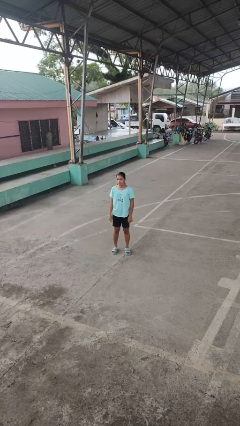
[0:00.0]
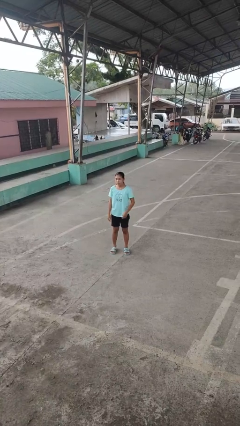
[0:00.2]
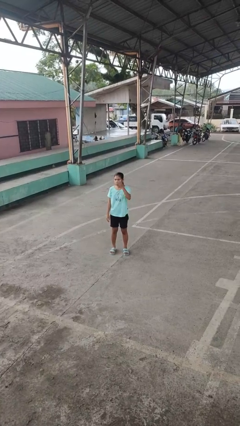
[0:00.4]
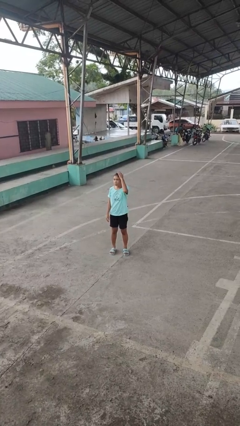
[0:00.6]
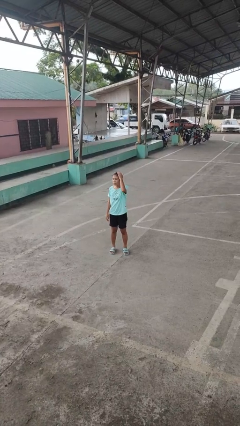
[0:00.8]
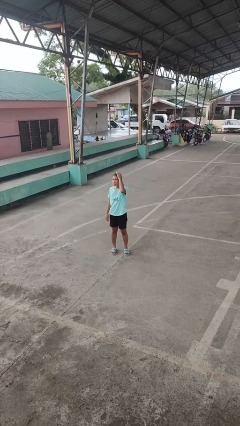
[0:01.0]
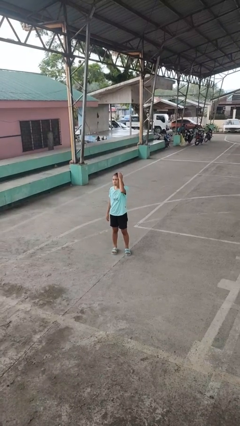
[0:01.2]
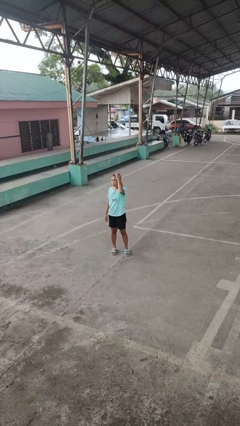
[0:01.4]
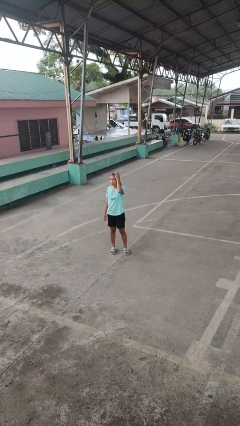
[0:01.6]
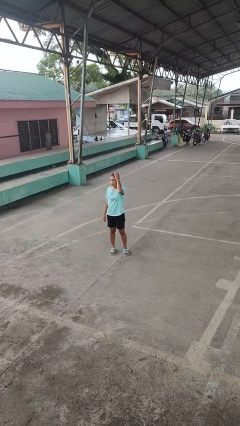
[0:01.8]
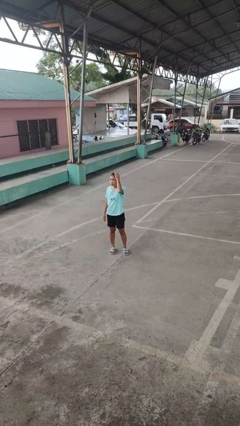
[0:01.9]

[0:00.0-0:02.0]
person pats head

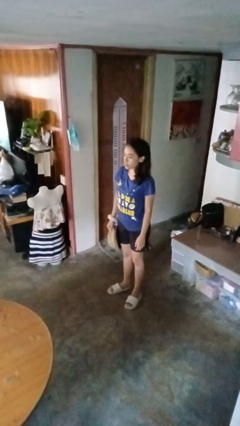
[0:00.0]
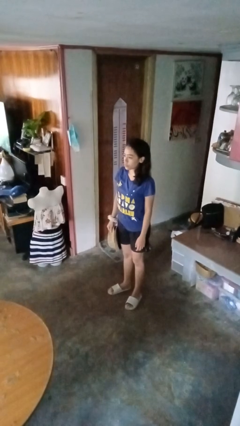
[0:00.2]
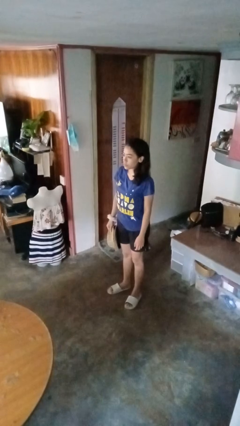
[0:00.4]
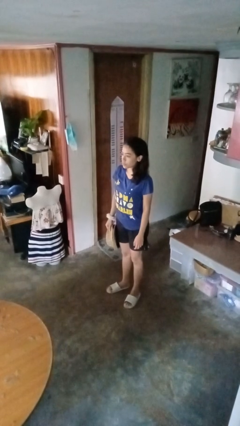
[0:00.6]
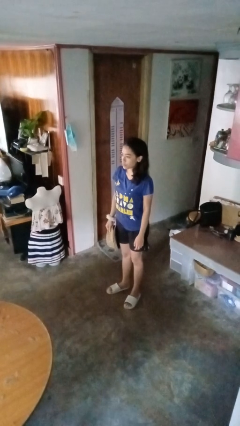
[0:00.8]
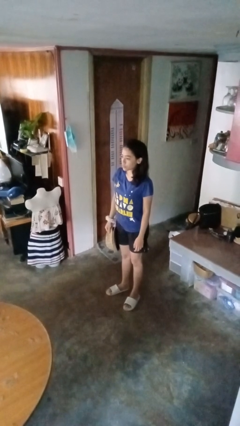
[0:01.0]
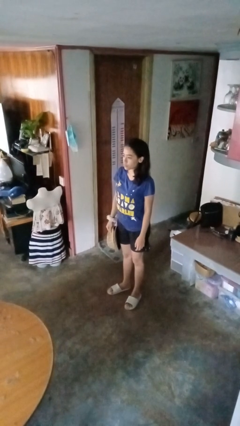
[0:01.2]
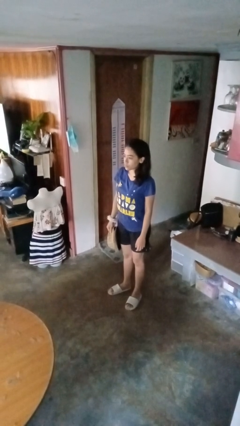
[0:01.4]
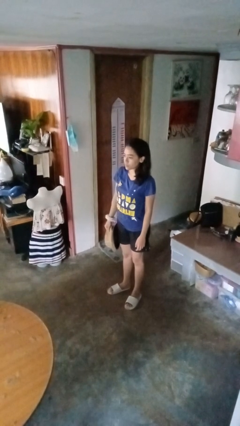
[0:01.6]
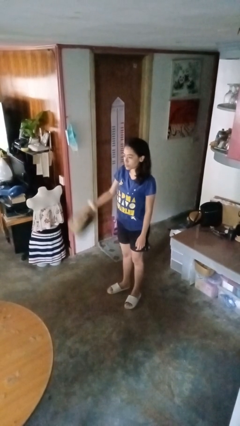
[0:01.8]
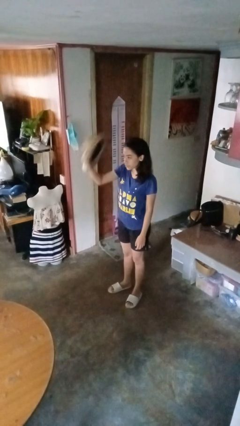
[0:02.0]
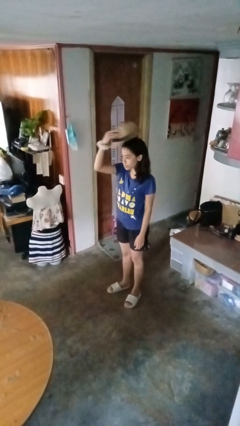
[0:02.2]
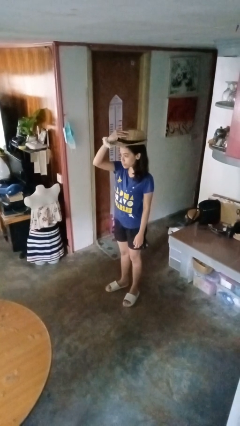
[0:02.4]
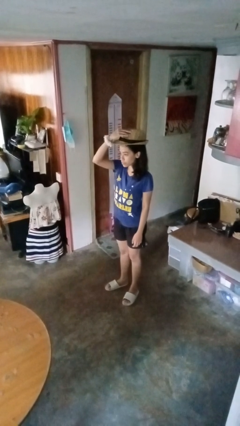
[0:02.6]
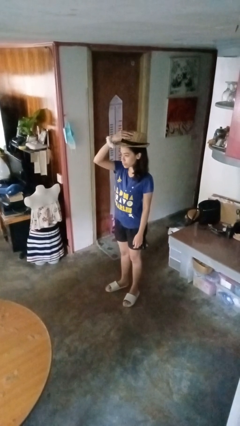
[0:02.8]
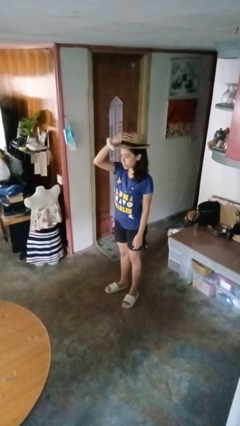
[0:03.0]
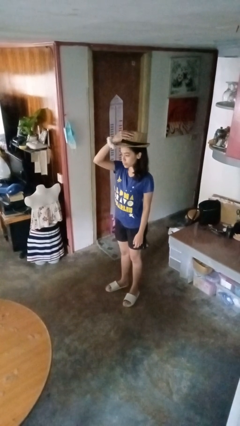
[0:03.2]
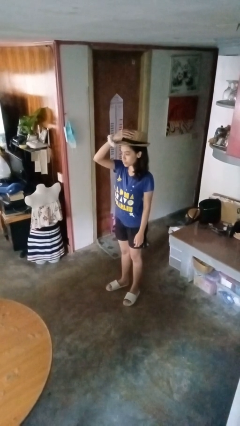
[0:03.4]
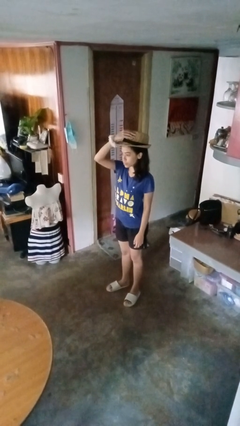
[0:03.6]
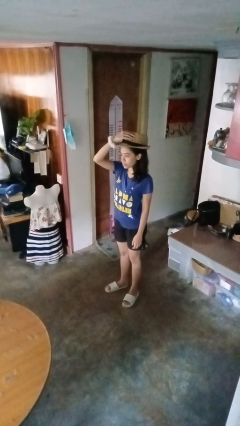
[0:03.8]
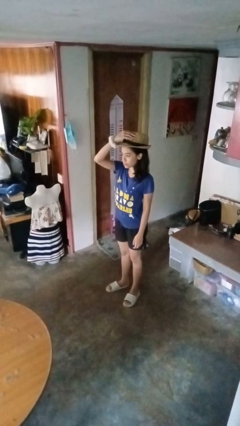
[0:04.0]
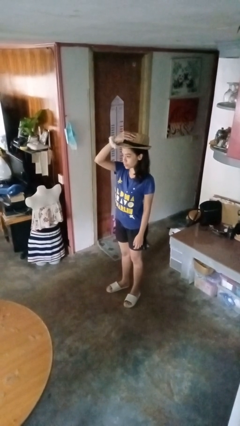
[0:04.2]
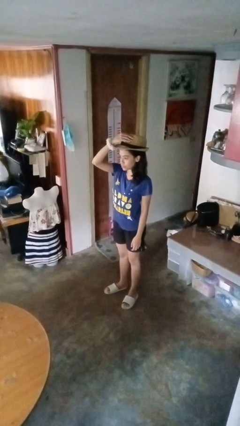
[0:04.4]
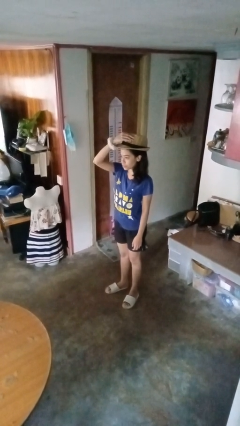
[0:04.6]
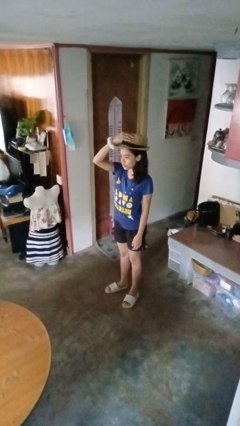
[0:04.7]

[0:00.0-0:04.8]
person puts on hat

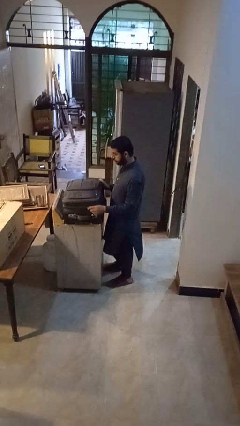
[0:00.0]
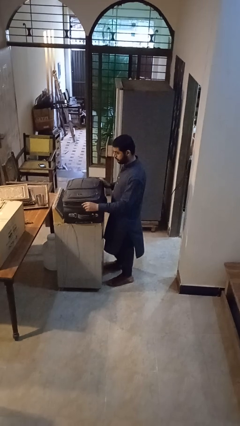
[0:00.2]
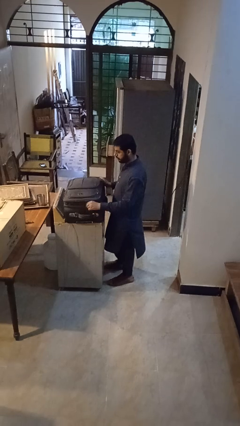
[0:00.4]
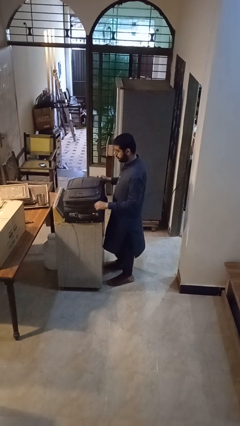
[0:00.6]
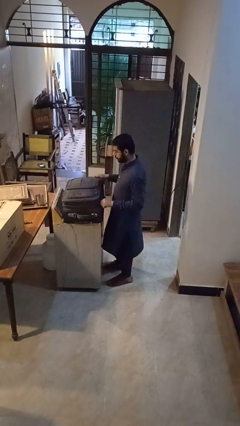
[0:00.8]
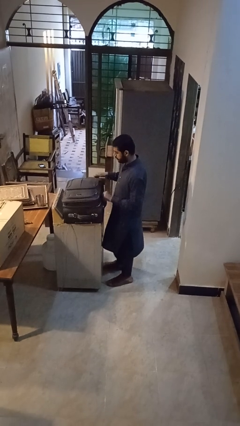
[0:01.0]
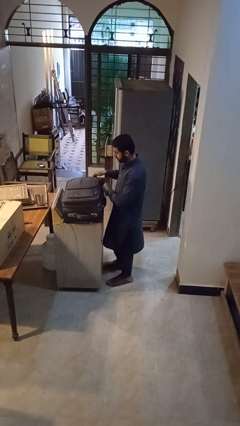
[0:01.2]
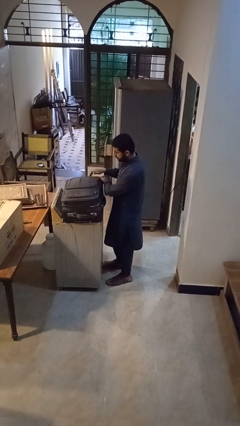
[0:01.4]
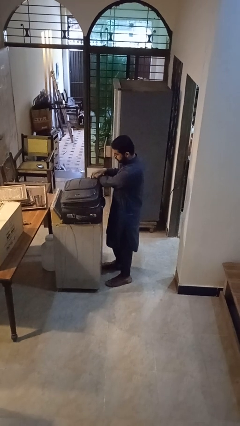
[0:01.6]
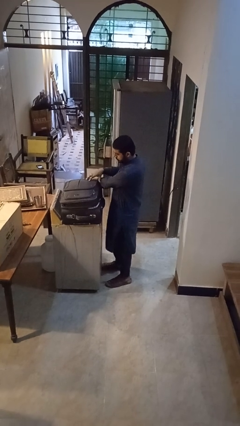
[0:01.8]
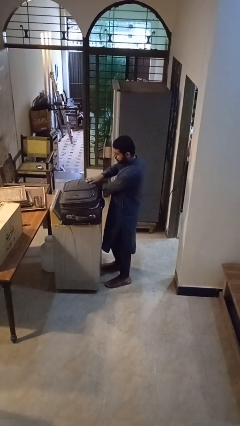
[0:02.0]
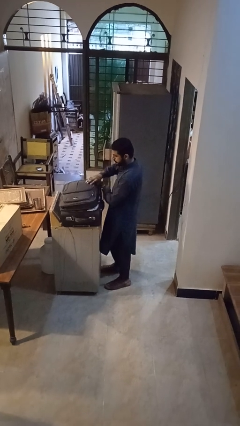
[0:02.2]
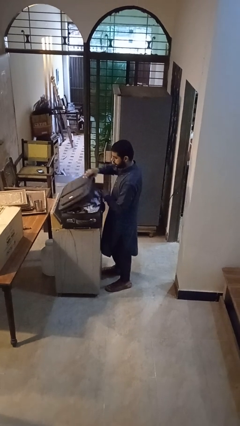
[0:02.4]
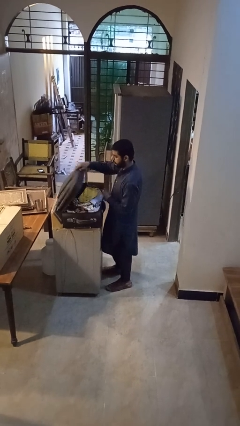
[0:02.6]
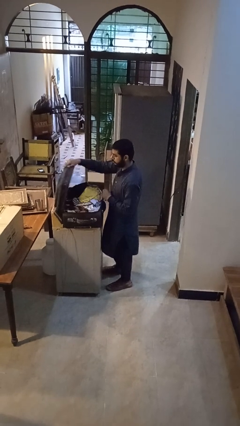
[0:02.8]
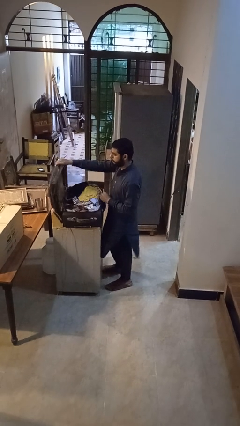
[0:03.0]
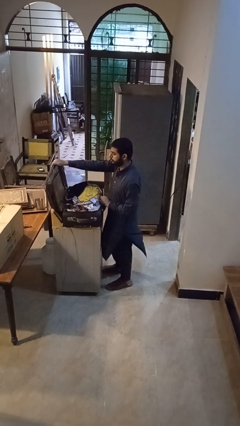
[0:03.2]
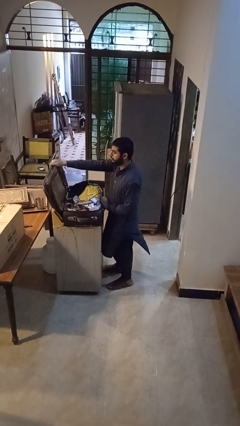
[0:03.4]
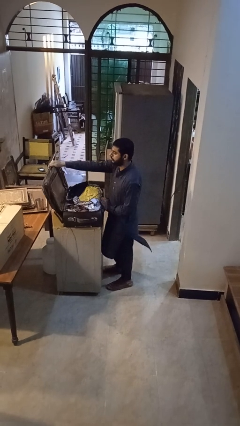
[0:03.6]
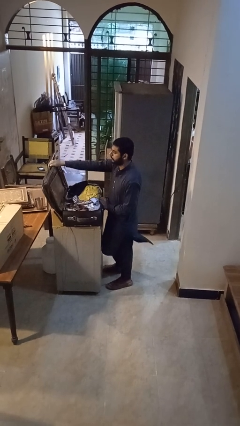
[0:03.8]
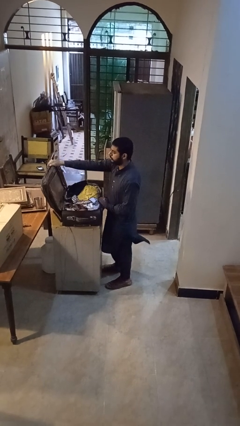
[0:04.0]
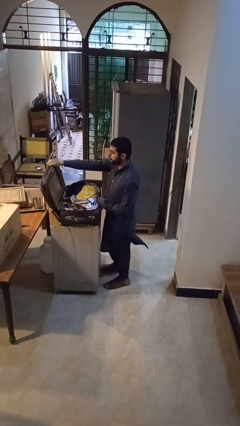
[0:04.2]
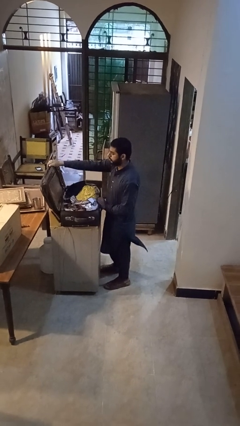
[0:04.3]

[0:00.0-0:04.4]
person opens suitcase

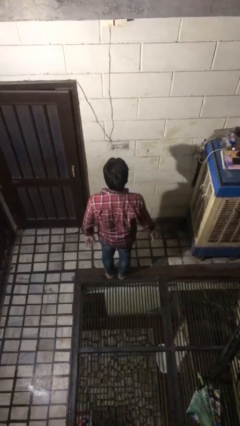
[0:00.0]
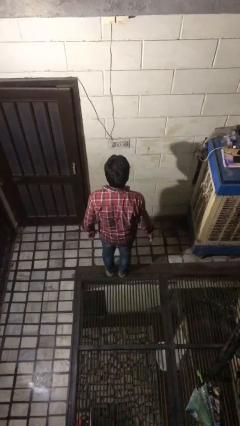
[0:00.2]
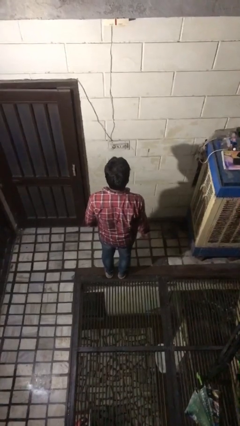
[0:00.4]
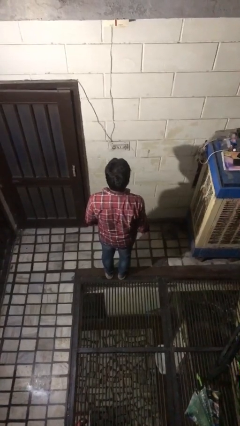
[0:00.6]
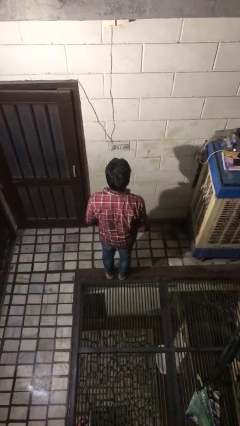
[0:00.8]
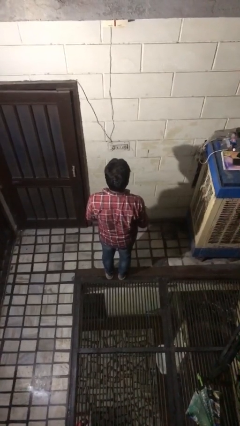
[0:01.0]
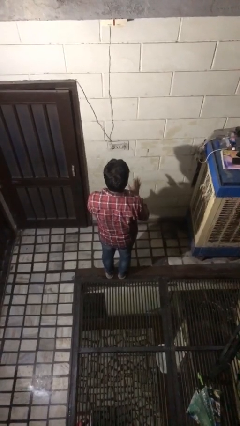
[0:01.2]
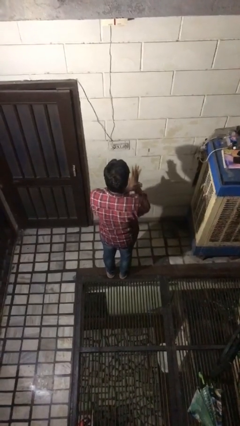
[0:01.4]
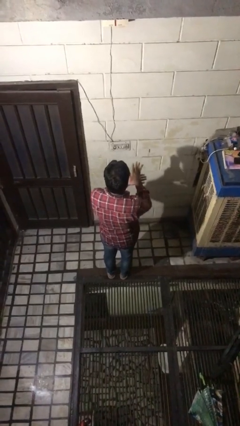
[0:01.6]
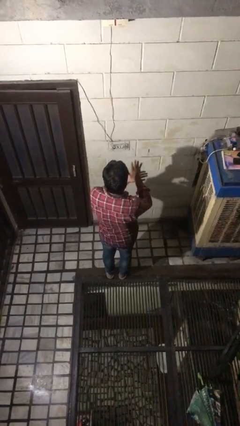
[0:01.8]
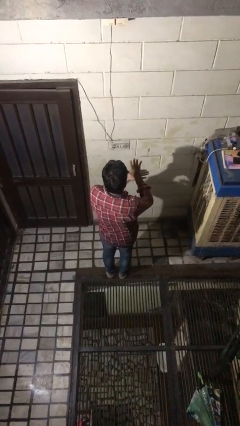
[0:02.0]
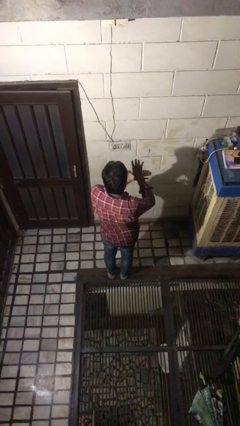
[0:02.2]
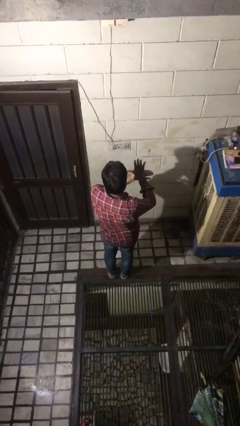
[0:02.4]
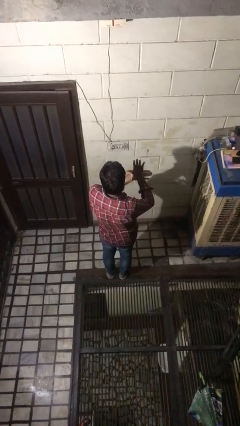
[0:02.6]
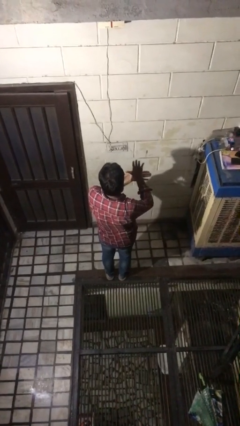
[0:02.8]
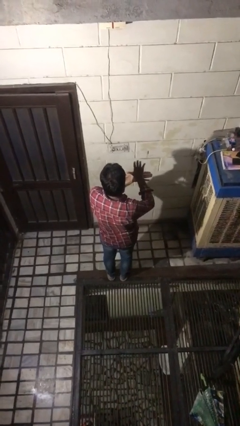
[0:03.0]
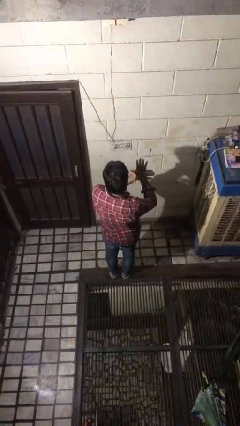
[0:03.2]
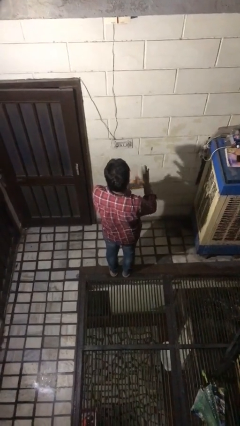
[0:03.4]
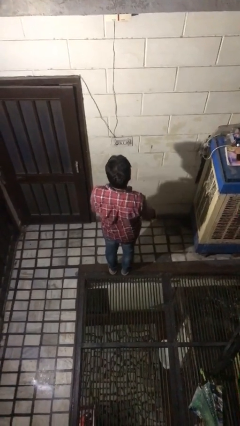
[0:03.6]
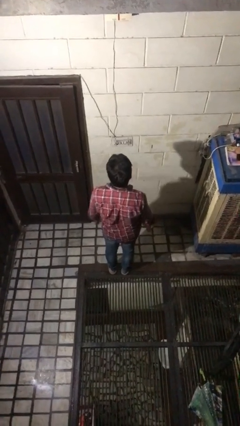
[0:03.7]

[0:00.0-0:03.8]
person gestures number five

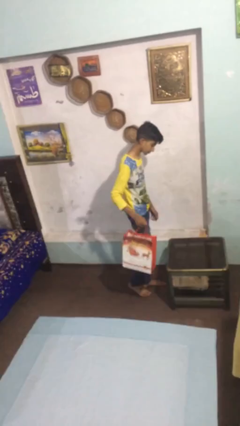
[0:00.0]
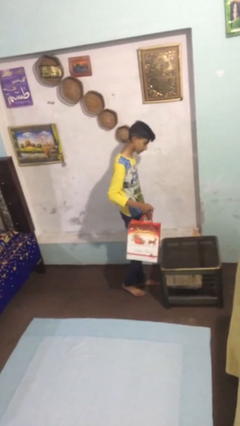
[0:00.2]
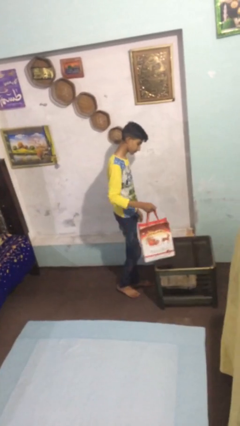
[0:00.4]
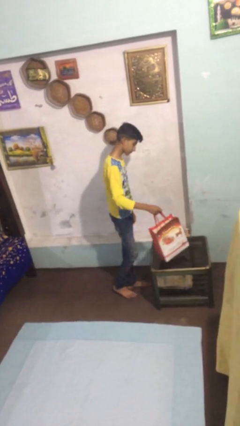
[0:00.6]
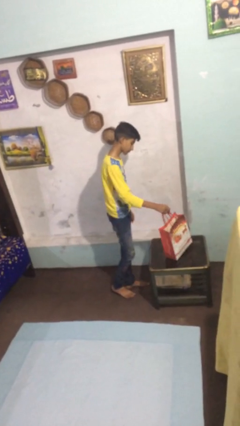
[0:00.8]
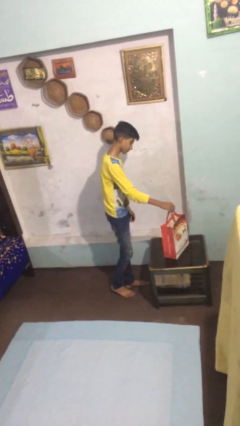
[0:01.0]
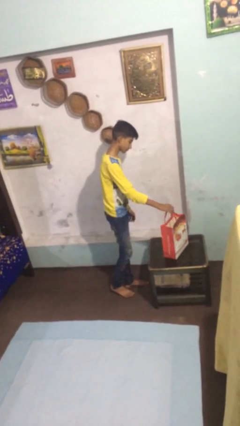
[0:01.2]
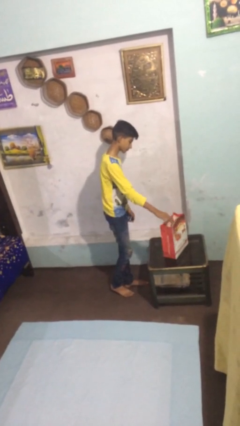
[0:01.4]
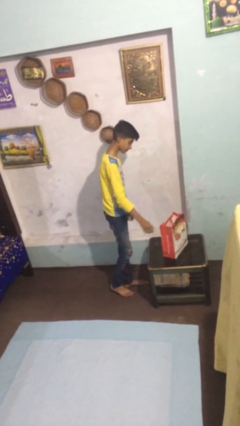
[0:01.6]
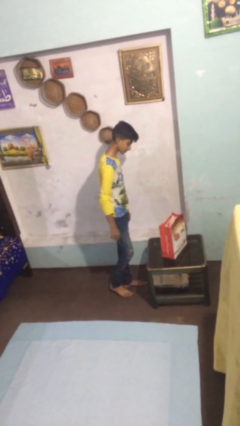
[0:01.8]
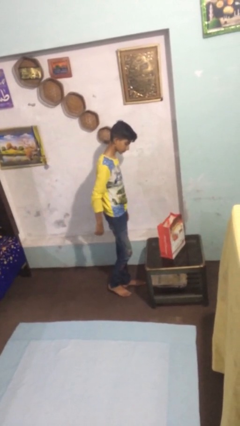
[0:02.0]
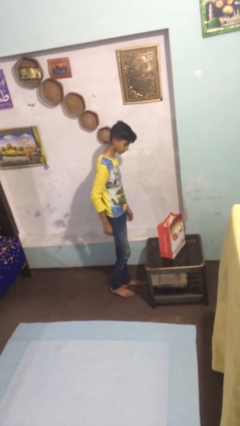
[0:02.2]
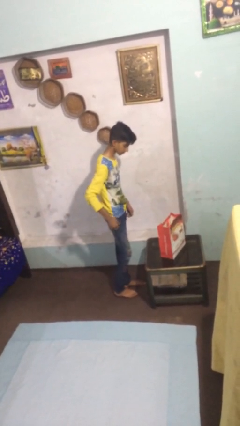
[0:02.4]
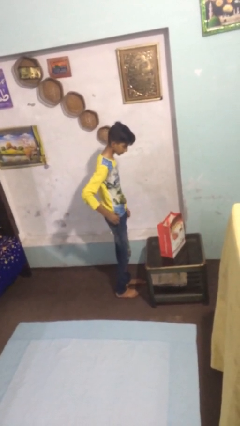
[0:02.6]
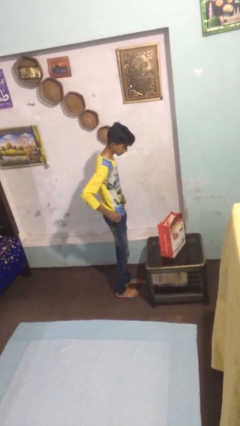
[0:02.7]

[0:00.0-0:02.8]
person puts down object on table
